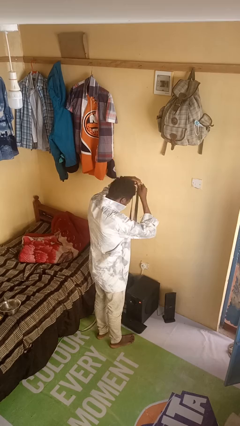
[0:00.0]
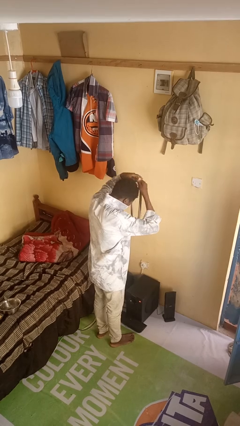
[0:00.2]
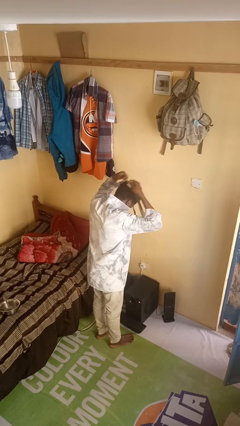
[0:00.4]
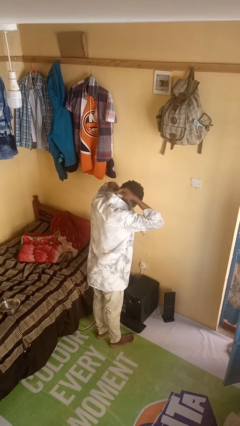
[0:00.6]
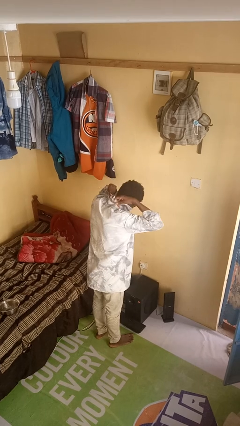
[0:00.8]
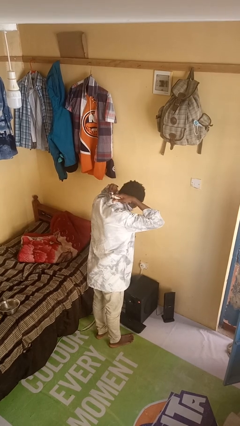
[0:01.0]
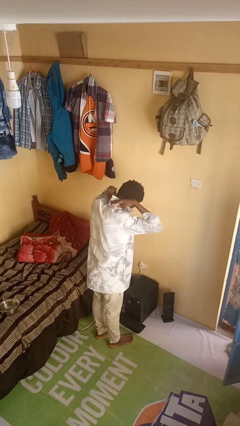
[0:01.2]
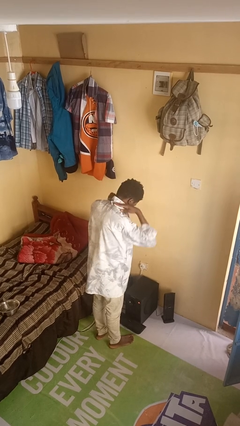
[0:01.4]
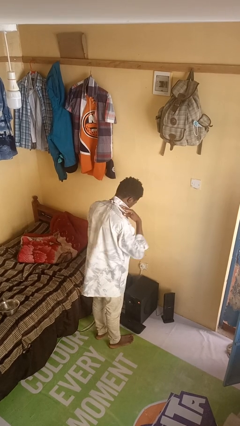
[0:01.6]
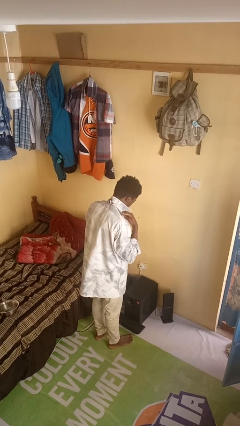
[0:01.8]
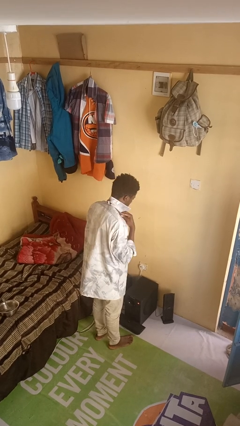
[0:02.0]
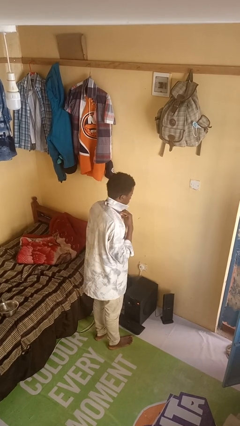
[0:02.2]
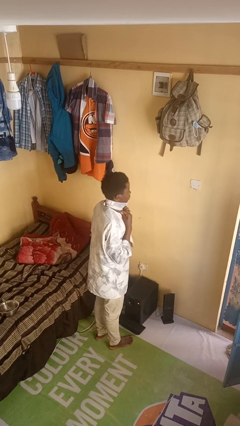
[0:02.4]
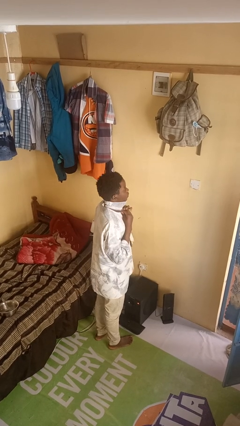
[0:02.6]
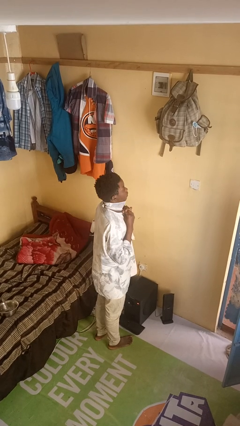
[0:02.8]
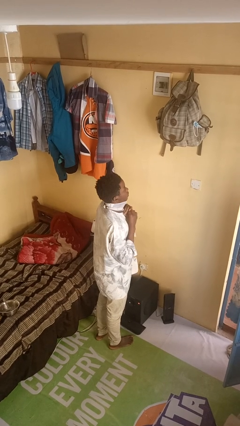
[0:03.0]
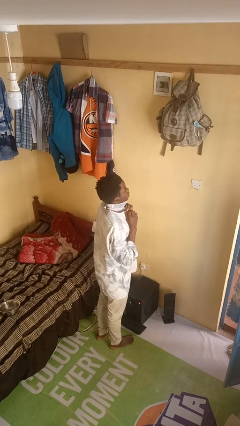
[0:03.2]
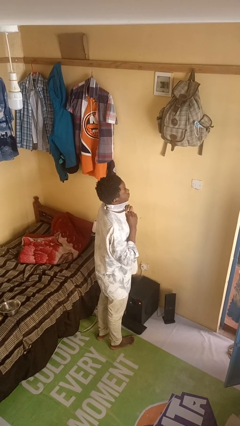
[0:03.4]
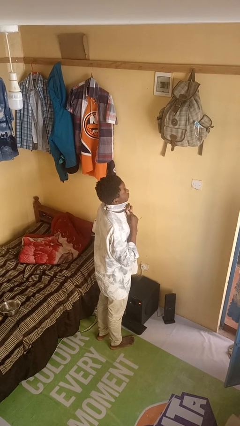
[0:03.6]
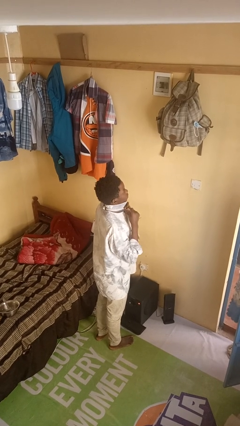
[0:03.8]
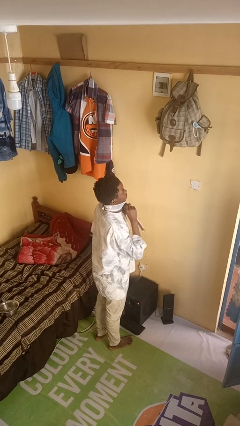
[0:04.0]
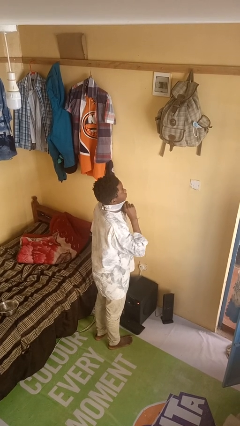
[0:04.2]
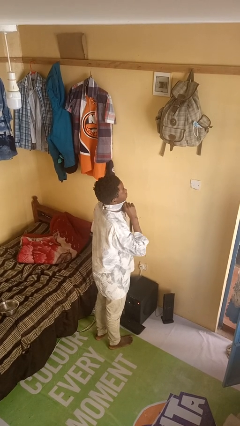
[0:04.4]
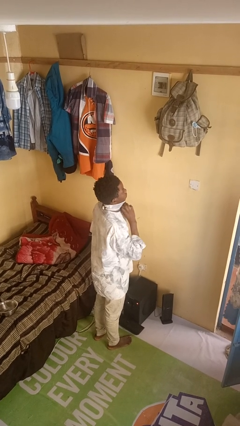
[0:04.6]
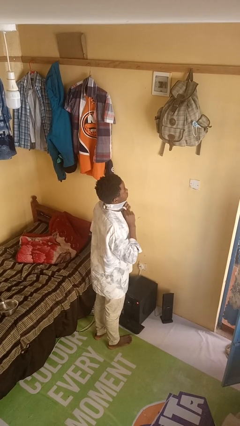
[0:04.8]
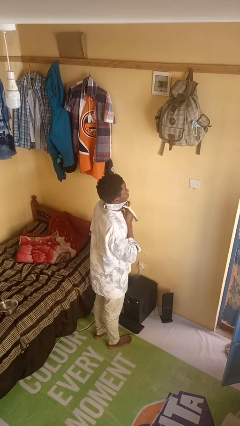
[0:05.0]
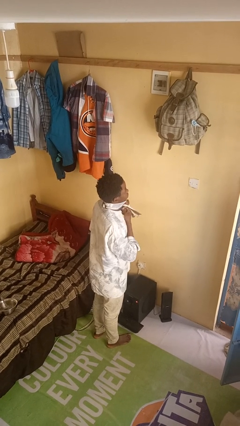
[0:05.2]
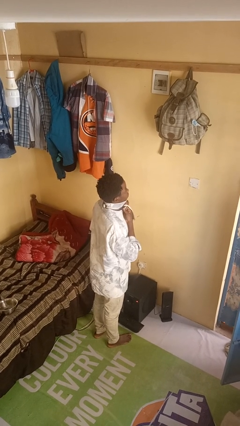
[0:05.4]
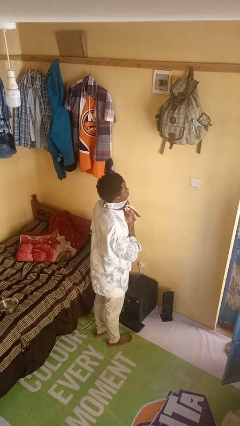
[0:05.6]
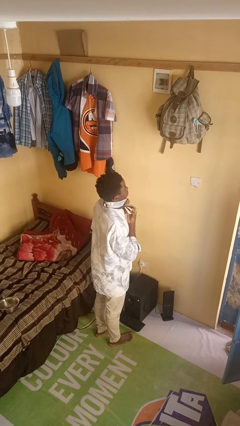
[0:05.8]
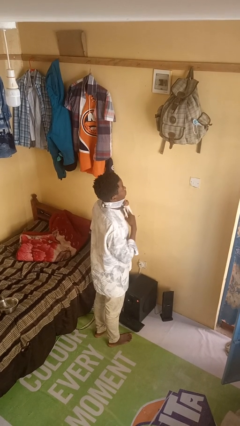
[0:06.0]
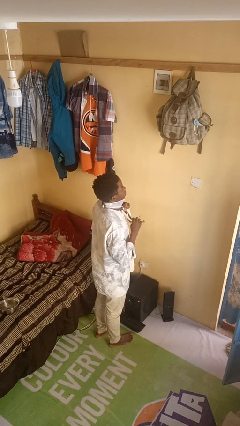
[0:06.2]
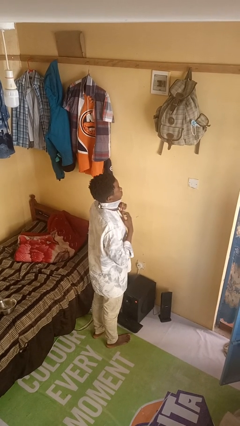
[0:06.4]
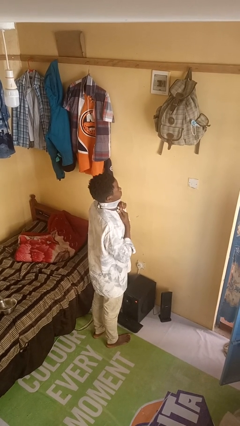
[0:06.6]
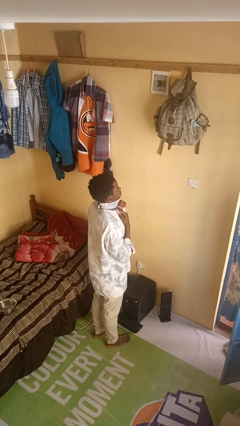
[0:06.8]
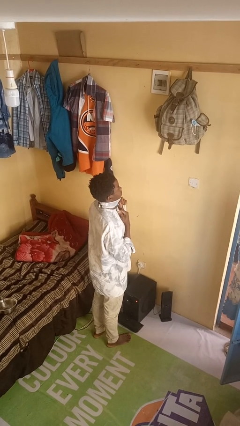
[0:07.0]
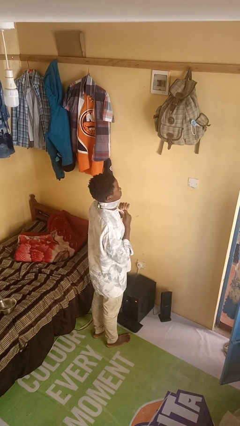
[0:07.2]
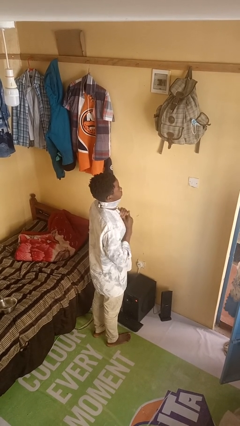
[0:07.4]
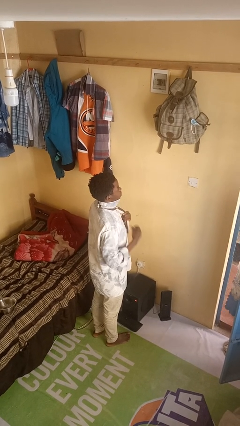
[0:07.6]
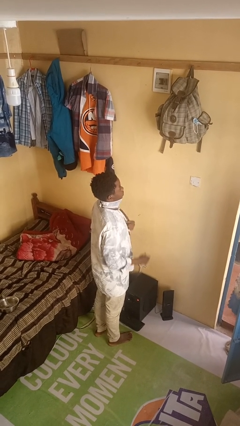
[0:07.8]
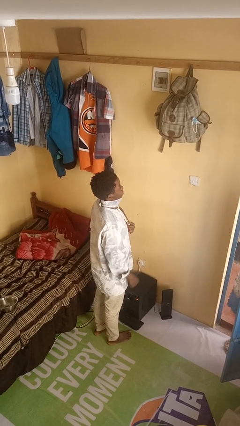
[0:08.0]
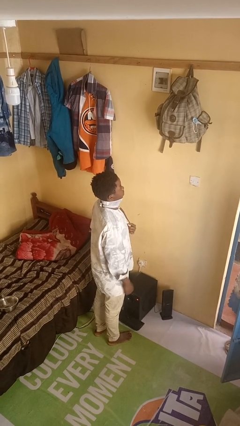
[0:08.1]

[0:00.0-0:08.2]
person puts on necktie

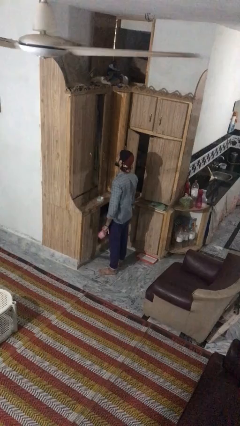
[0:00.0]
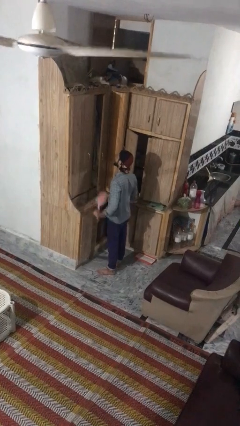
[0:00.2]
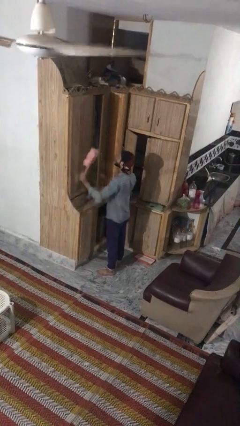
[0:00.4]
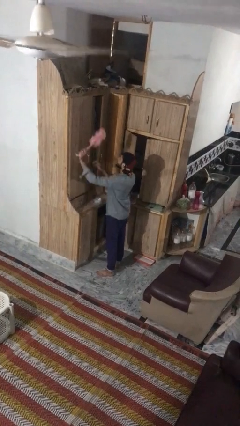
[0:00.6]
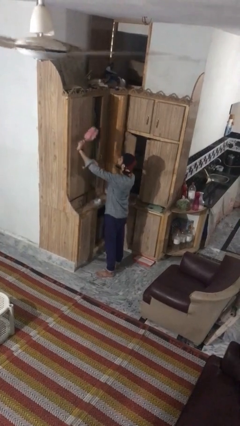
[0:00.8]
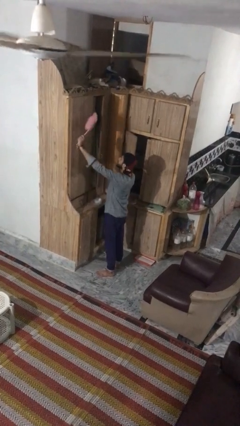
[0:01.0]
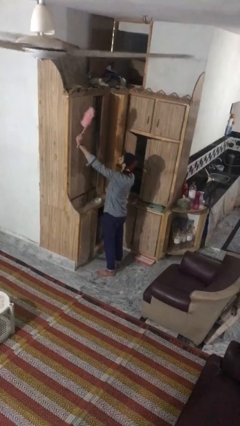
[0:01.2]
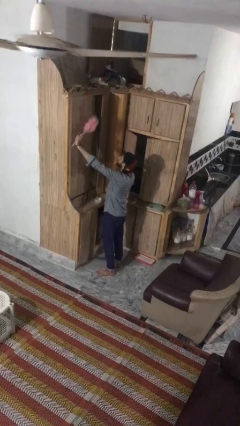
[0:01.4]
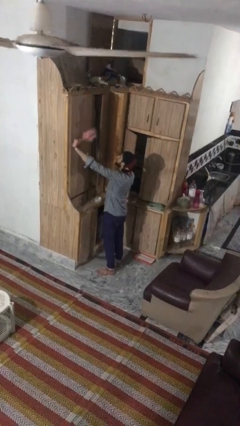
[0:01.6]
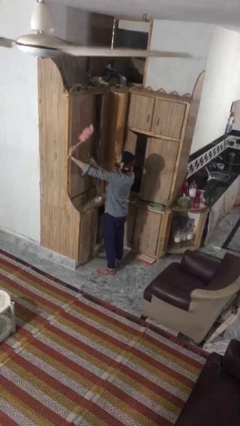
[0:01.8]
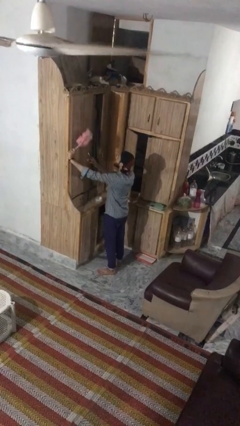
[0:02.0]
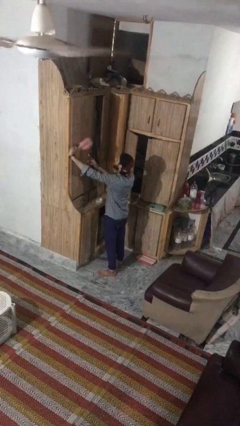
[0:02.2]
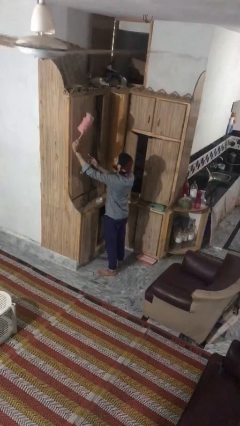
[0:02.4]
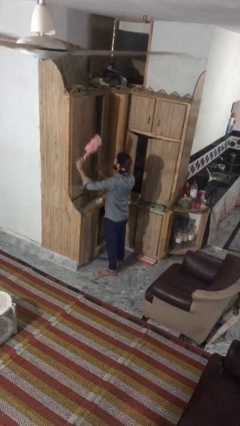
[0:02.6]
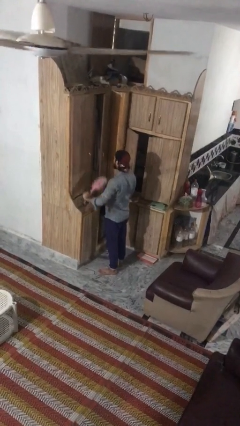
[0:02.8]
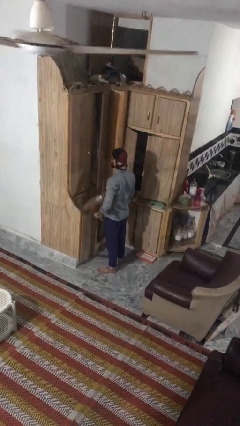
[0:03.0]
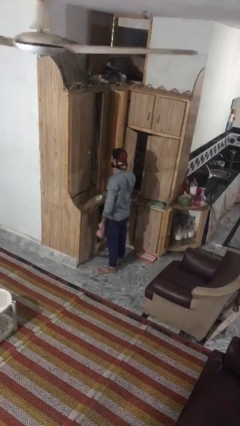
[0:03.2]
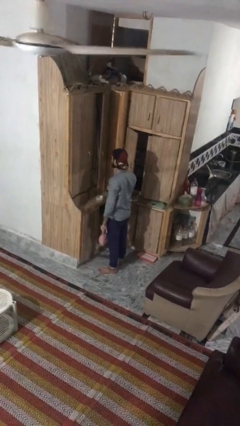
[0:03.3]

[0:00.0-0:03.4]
person dusts furniture

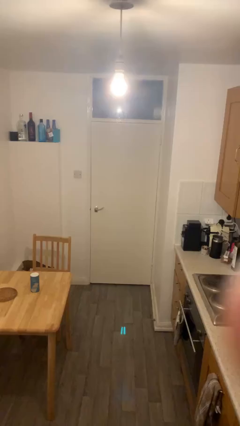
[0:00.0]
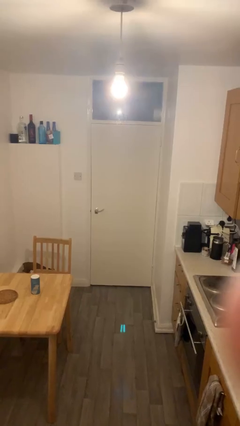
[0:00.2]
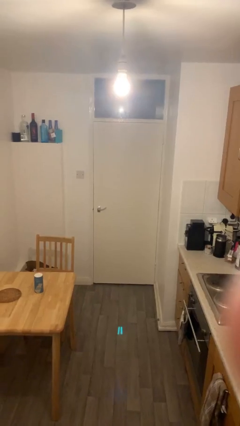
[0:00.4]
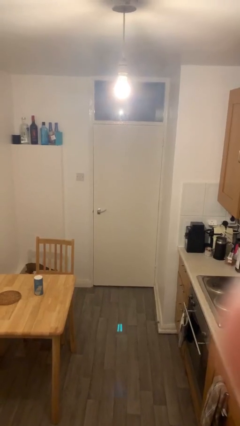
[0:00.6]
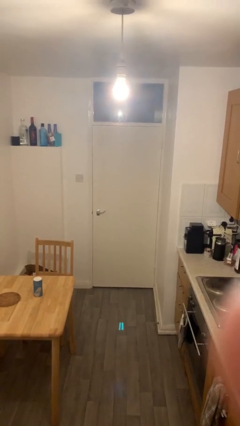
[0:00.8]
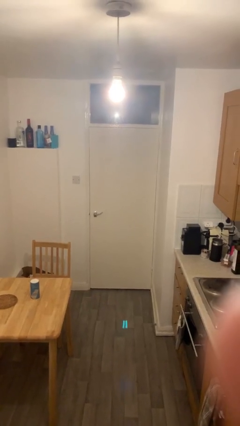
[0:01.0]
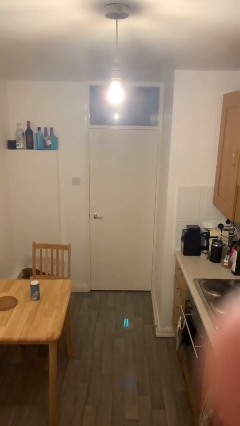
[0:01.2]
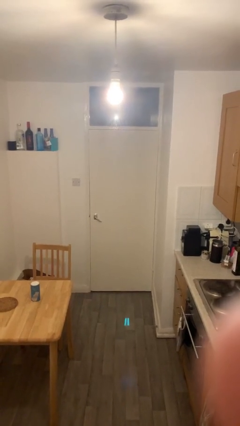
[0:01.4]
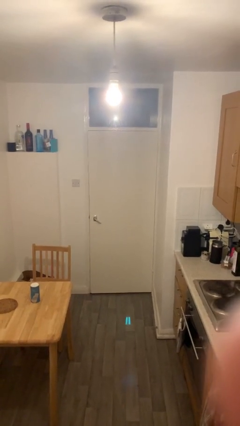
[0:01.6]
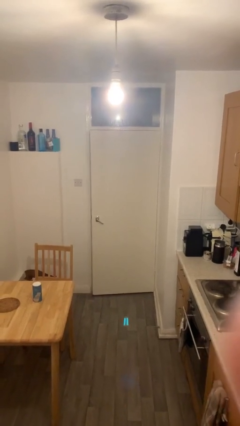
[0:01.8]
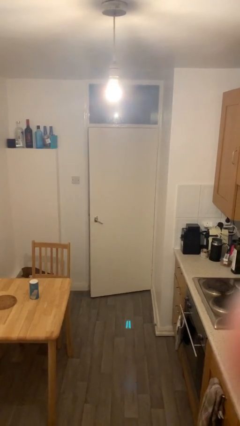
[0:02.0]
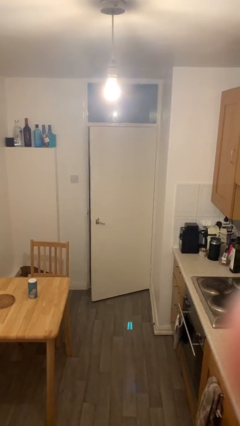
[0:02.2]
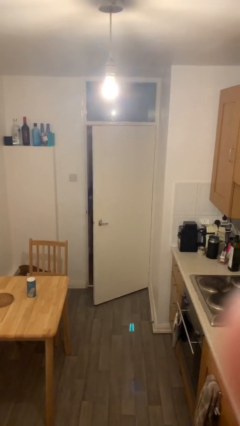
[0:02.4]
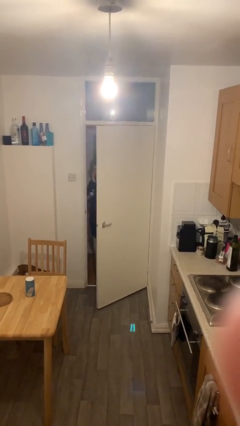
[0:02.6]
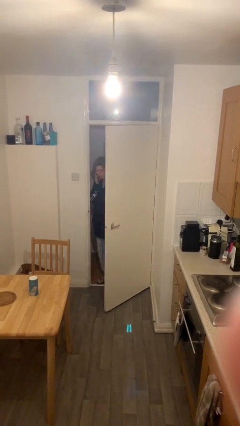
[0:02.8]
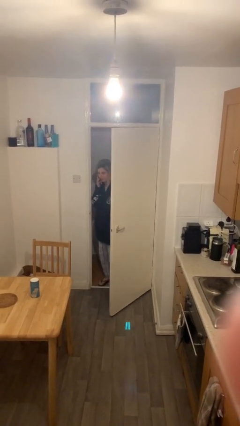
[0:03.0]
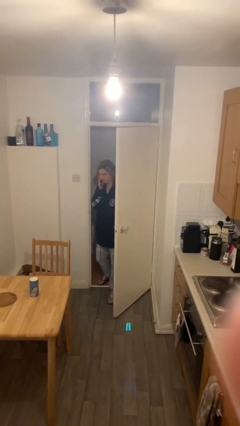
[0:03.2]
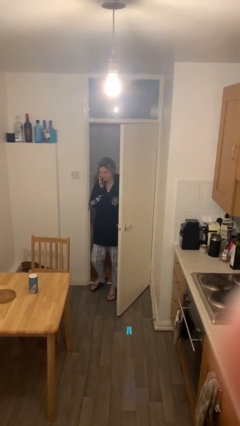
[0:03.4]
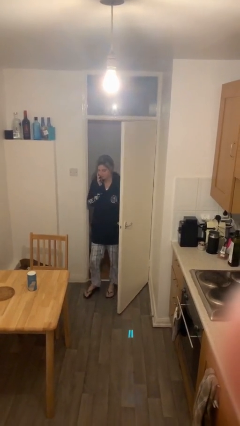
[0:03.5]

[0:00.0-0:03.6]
person opens facility door

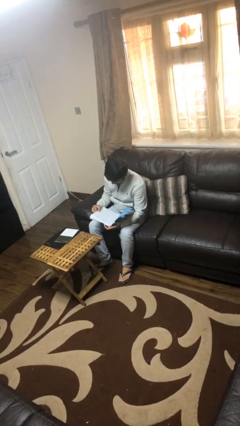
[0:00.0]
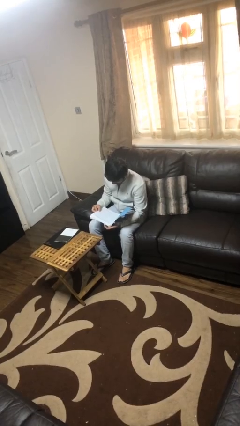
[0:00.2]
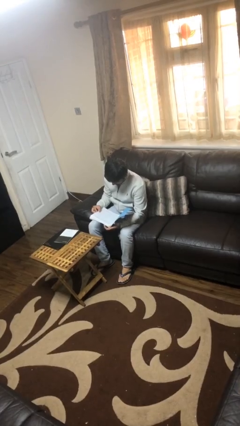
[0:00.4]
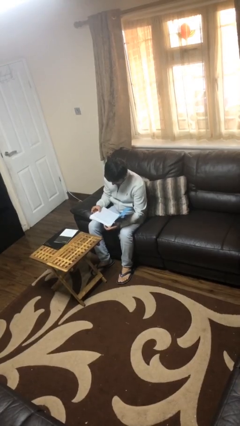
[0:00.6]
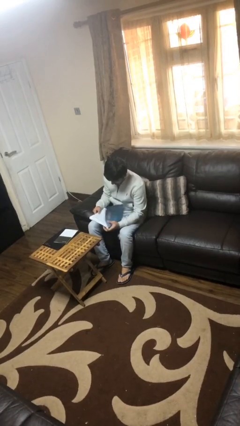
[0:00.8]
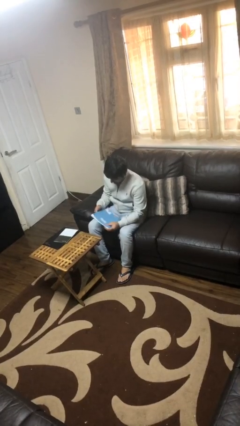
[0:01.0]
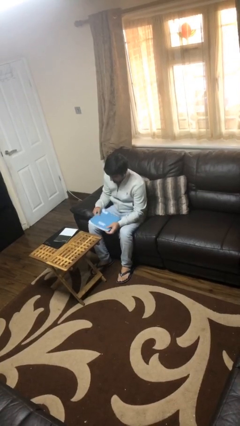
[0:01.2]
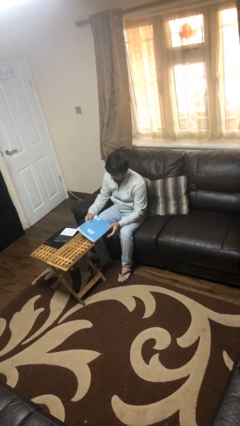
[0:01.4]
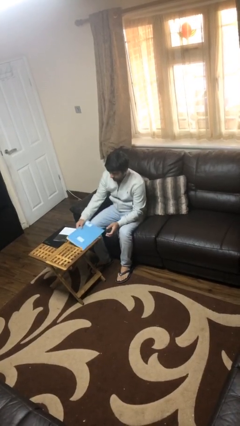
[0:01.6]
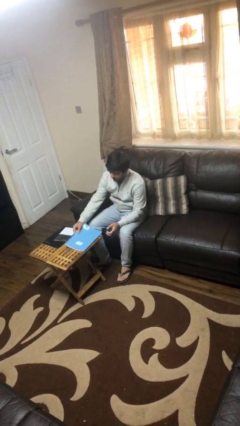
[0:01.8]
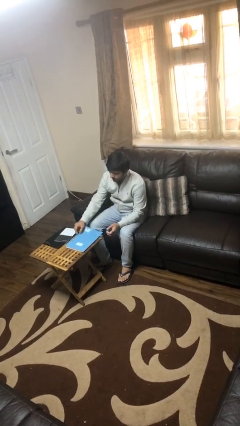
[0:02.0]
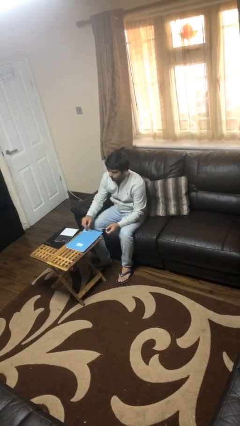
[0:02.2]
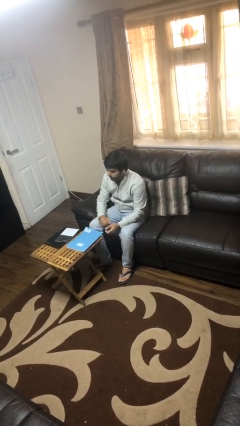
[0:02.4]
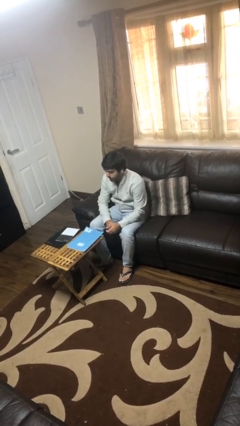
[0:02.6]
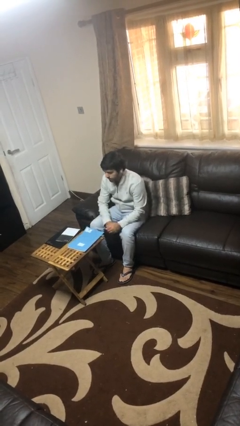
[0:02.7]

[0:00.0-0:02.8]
person puts down object on table
